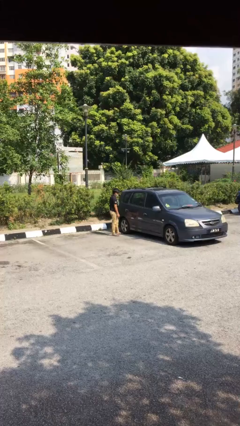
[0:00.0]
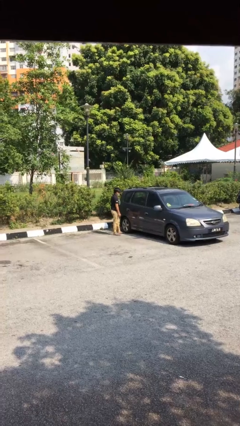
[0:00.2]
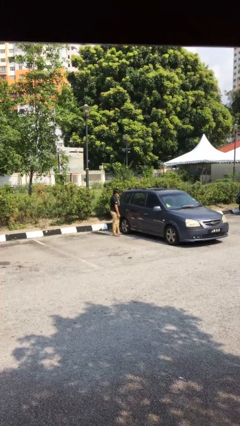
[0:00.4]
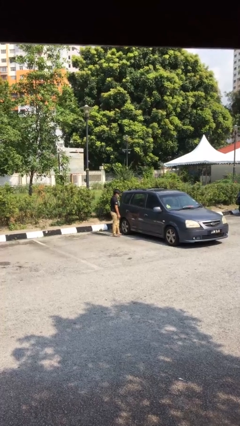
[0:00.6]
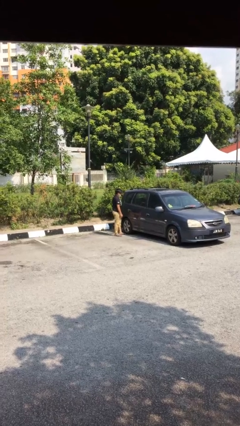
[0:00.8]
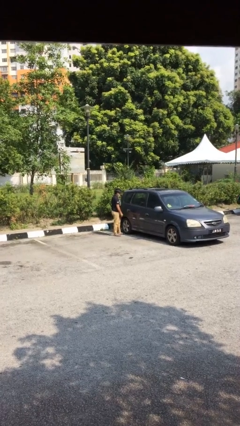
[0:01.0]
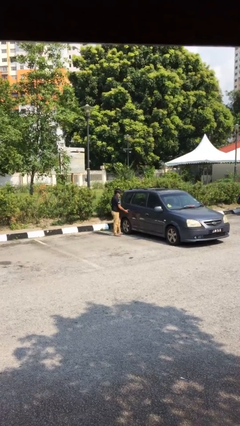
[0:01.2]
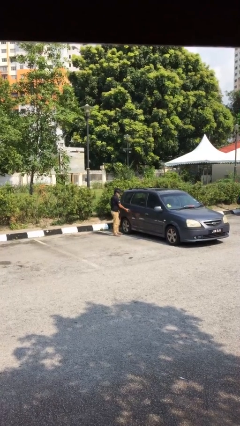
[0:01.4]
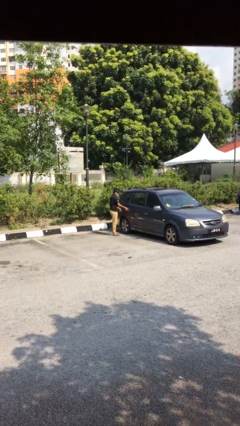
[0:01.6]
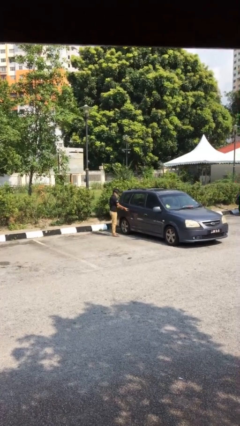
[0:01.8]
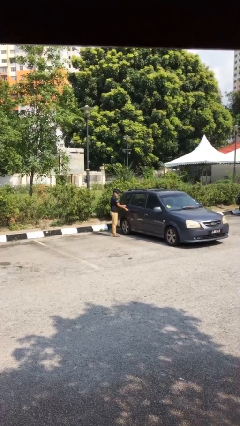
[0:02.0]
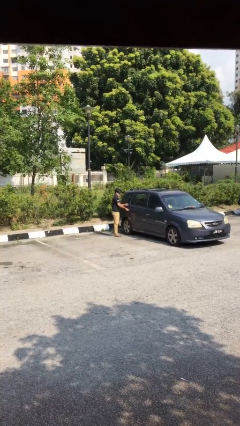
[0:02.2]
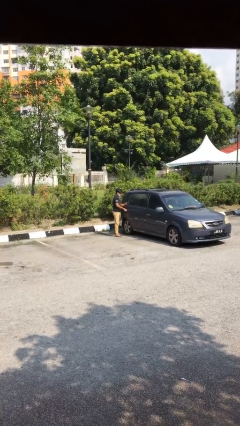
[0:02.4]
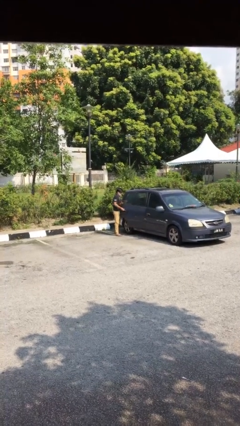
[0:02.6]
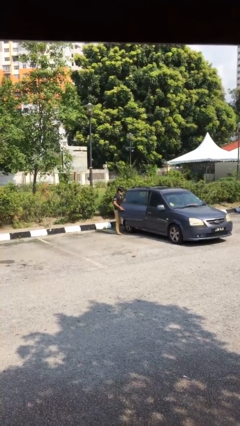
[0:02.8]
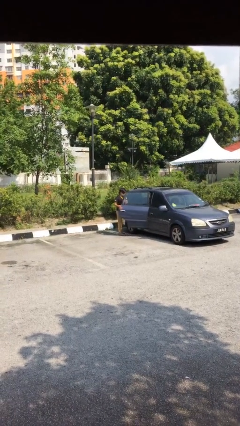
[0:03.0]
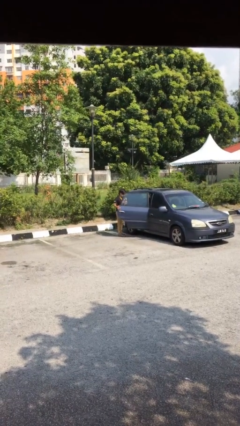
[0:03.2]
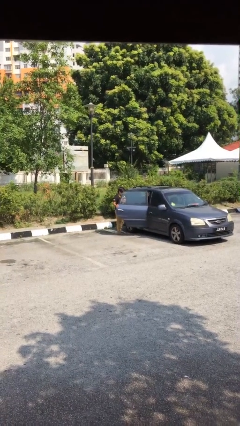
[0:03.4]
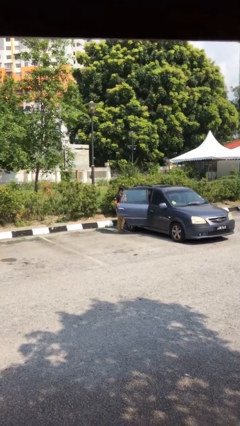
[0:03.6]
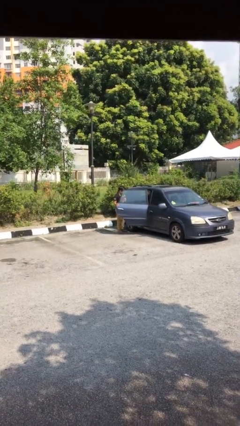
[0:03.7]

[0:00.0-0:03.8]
person opens car door

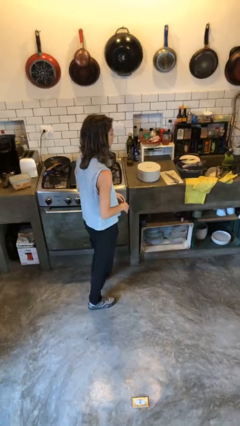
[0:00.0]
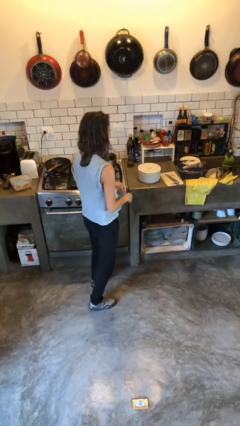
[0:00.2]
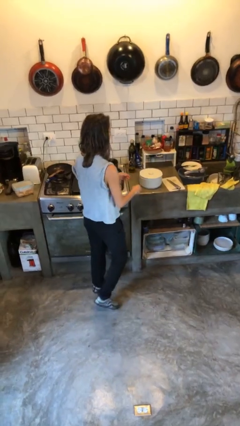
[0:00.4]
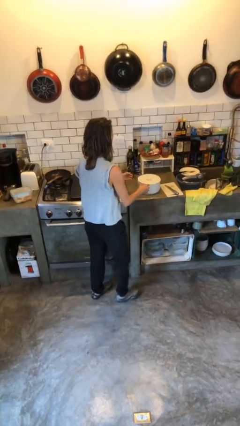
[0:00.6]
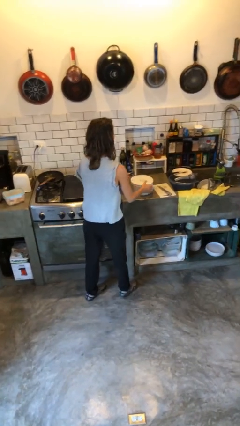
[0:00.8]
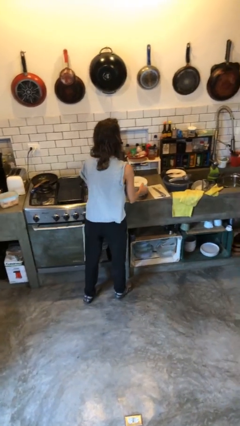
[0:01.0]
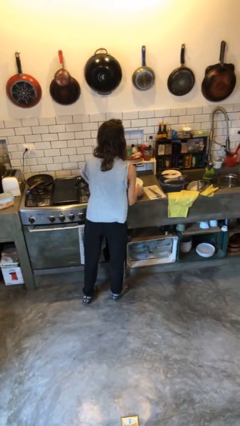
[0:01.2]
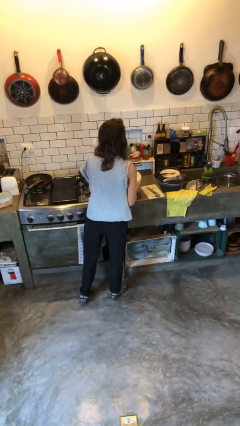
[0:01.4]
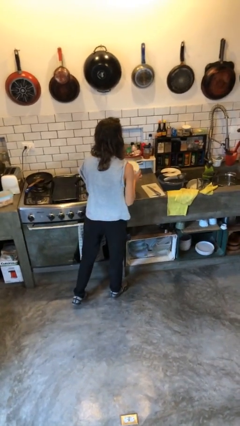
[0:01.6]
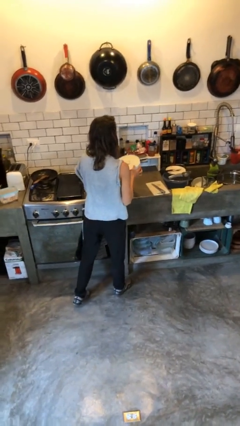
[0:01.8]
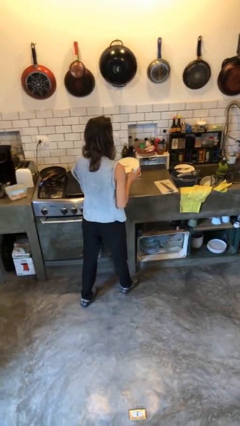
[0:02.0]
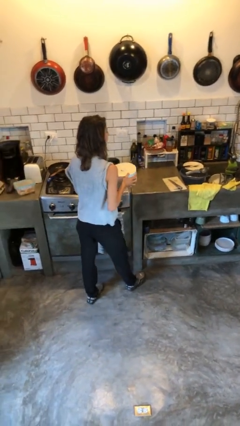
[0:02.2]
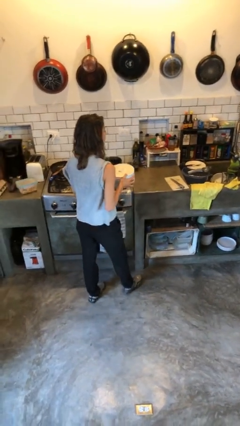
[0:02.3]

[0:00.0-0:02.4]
person picks up object from countertop

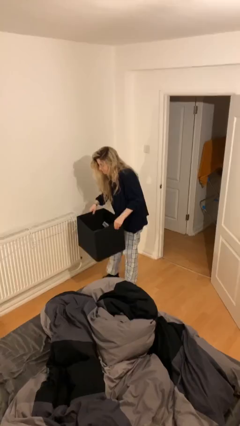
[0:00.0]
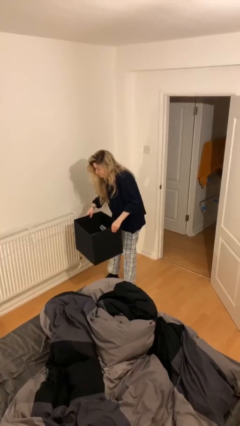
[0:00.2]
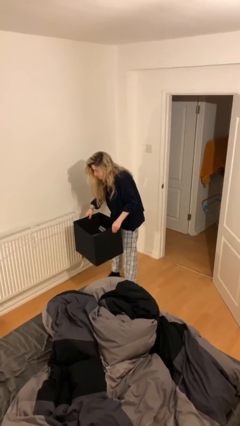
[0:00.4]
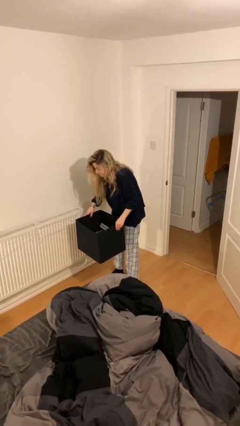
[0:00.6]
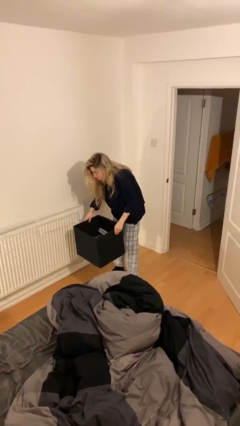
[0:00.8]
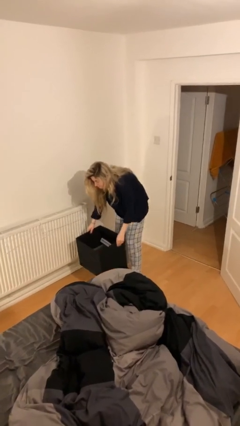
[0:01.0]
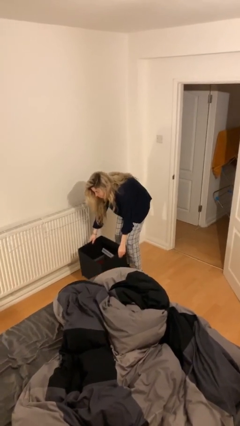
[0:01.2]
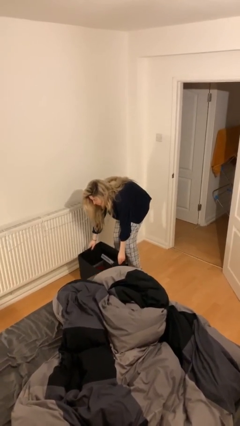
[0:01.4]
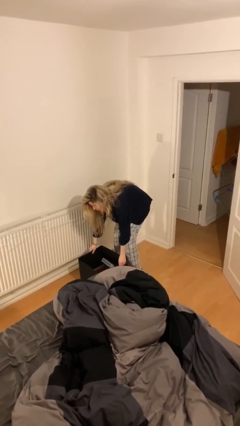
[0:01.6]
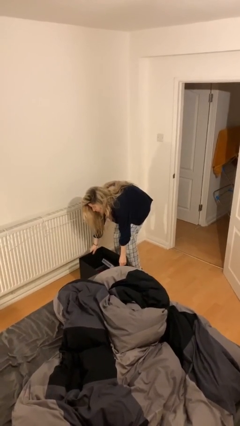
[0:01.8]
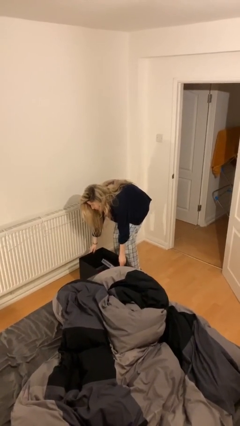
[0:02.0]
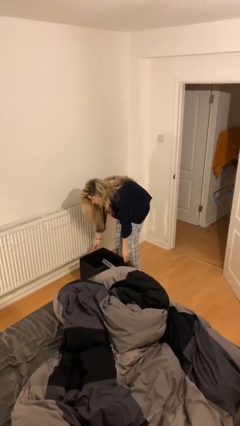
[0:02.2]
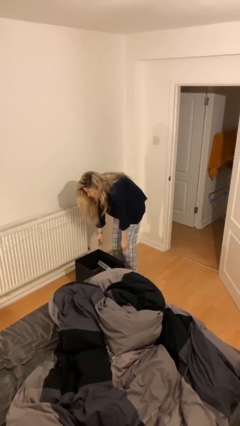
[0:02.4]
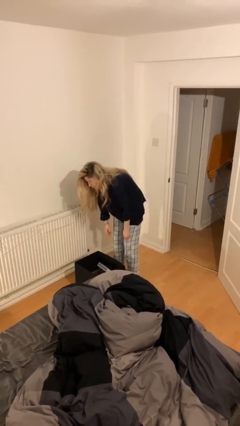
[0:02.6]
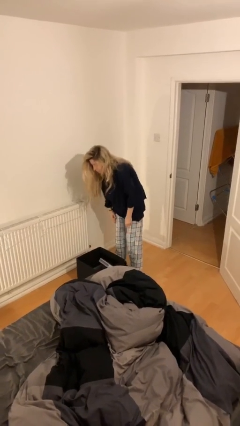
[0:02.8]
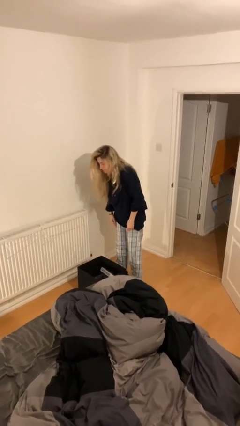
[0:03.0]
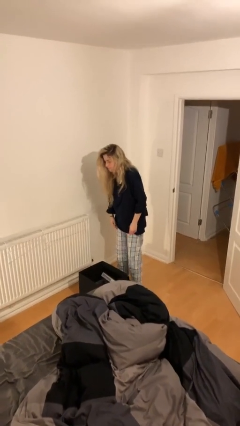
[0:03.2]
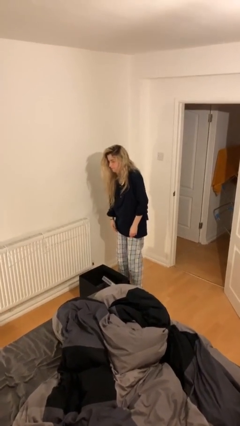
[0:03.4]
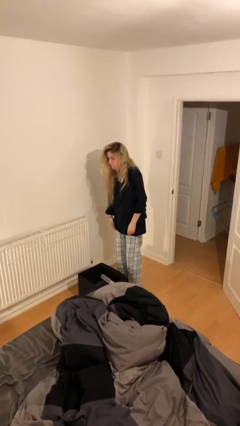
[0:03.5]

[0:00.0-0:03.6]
person puts down object on floor

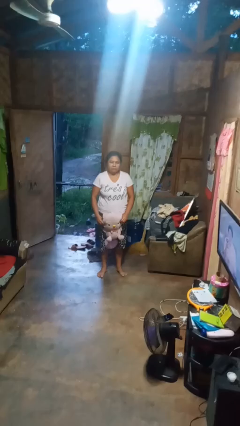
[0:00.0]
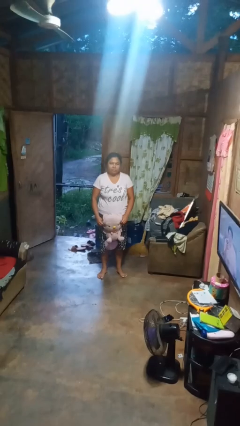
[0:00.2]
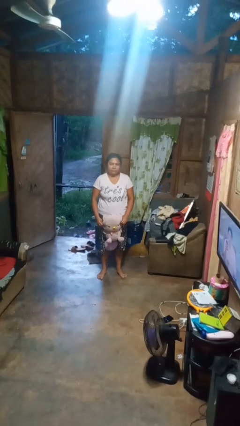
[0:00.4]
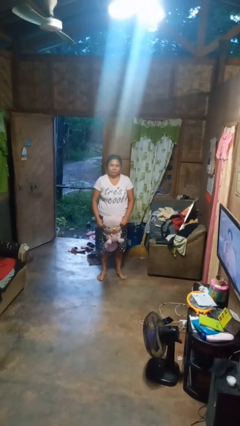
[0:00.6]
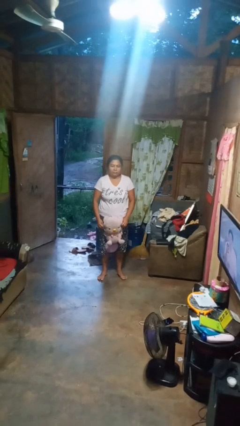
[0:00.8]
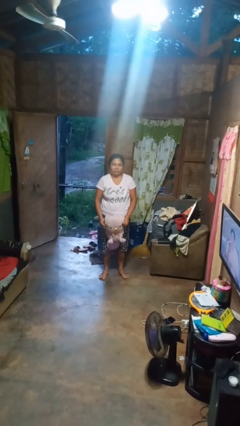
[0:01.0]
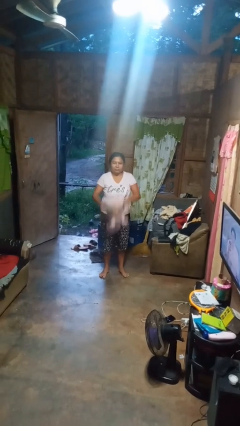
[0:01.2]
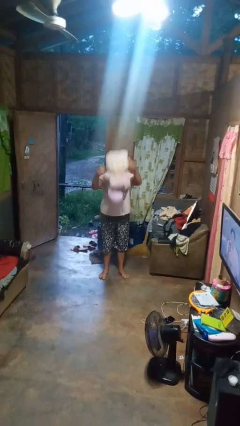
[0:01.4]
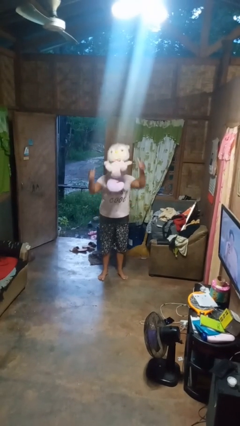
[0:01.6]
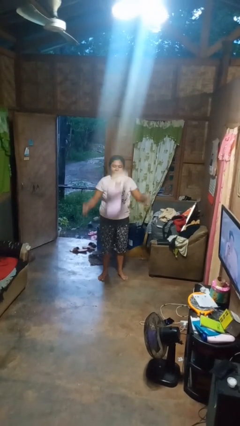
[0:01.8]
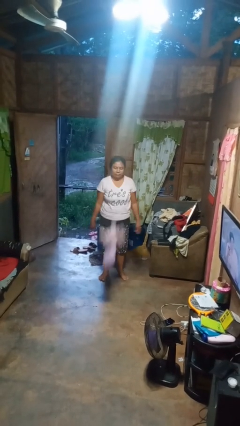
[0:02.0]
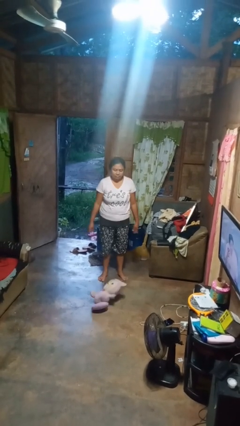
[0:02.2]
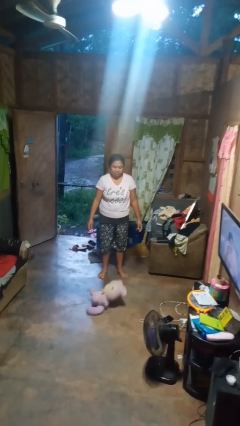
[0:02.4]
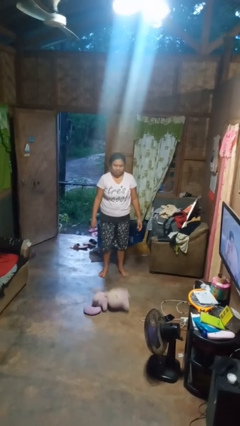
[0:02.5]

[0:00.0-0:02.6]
person throws object into air

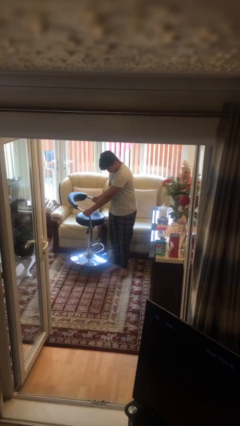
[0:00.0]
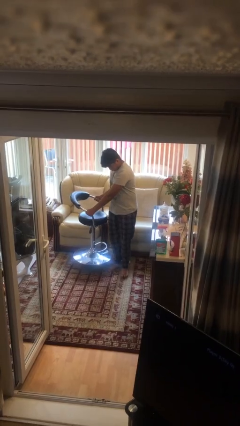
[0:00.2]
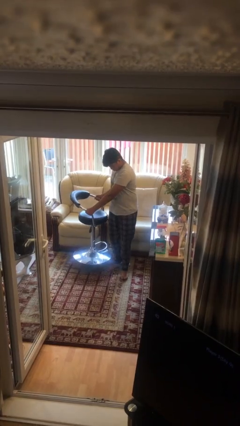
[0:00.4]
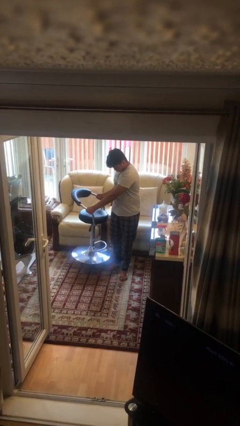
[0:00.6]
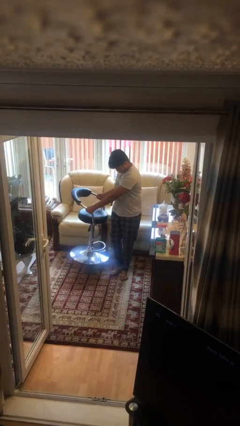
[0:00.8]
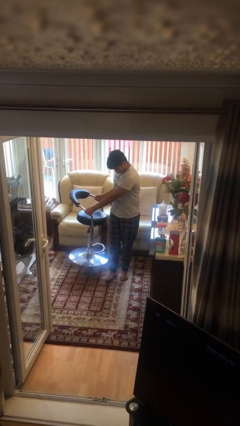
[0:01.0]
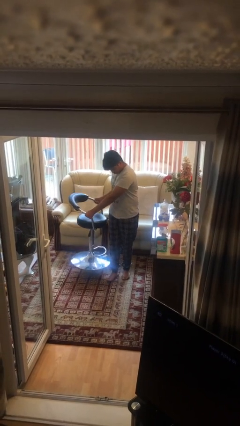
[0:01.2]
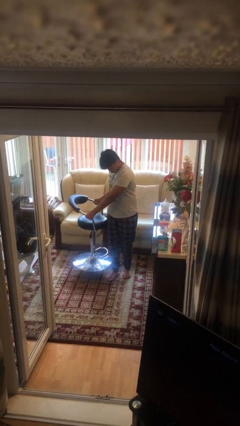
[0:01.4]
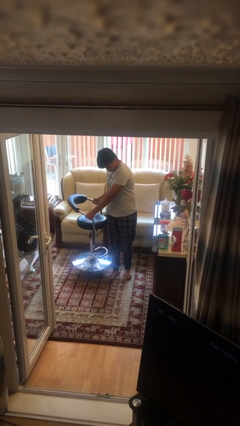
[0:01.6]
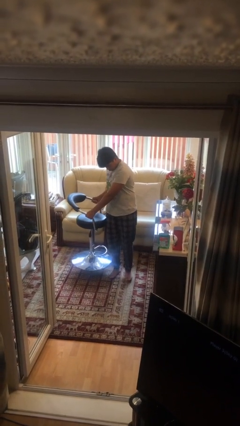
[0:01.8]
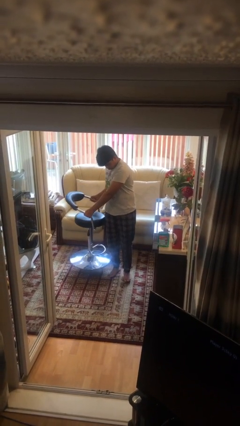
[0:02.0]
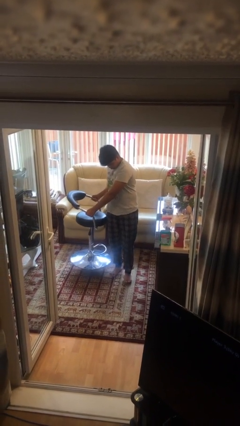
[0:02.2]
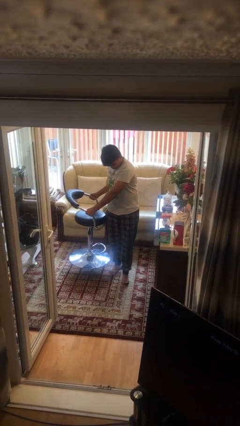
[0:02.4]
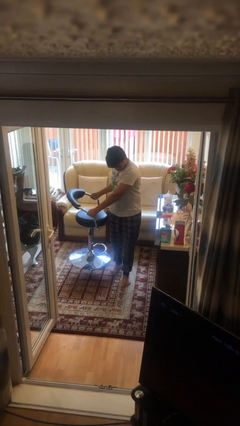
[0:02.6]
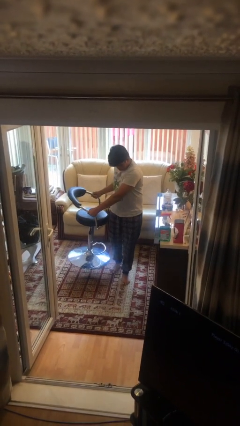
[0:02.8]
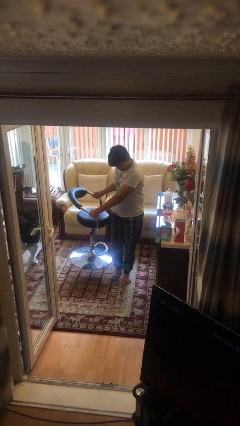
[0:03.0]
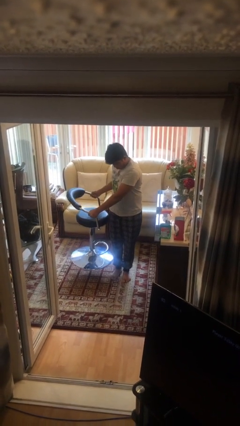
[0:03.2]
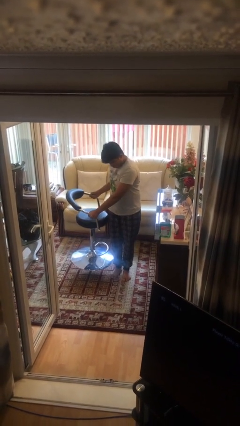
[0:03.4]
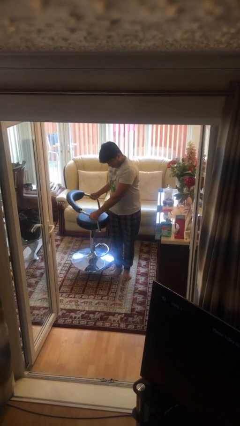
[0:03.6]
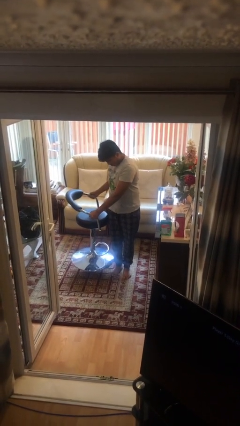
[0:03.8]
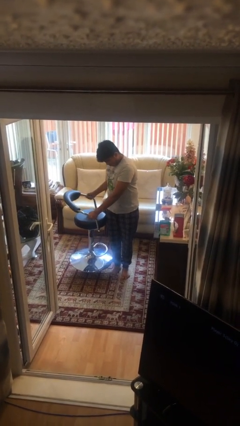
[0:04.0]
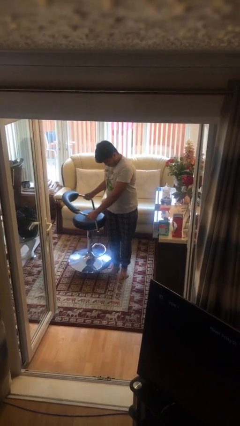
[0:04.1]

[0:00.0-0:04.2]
person carries heavy object

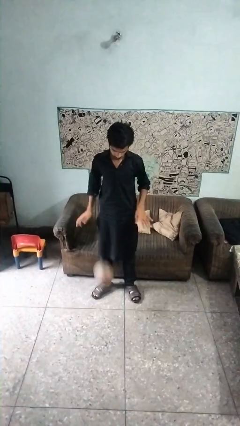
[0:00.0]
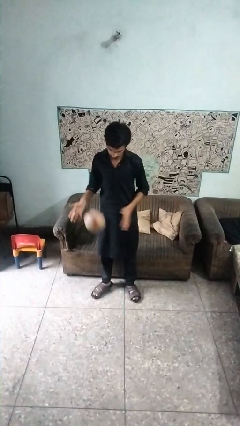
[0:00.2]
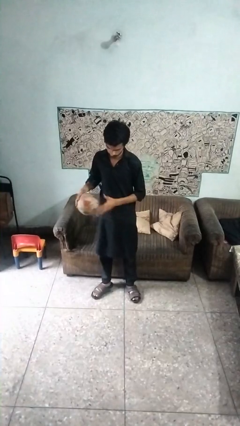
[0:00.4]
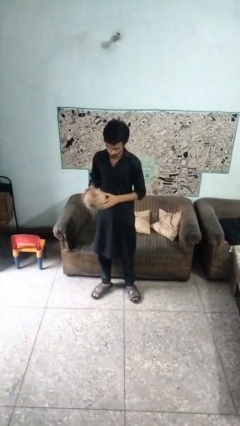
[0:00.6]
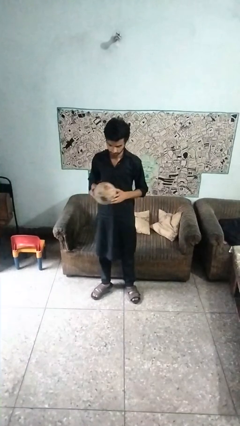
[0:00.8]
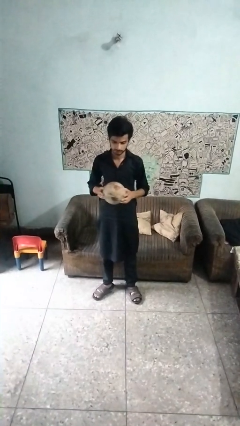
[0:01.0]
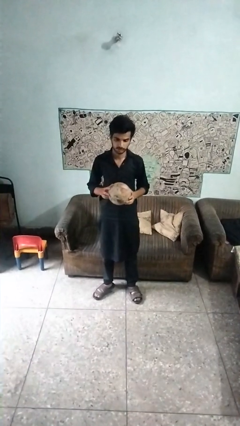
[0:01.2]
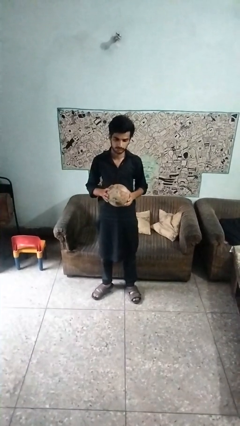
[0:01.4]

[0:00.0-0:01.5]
person takes off hoodie
